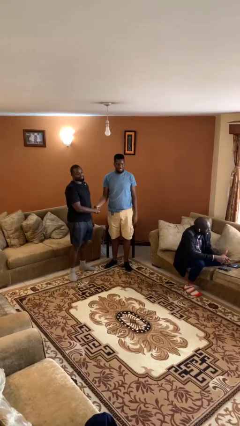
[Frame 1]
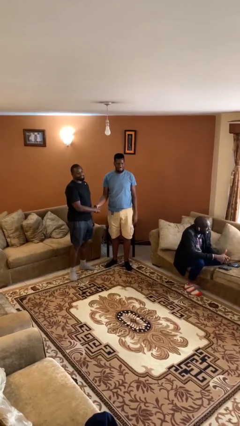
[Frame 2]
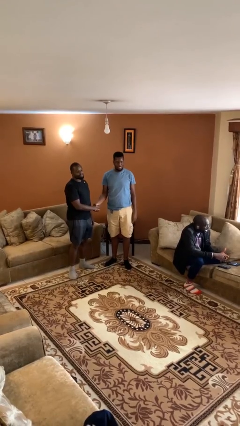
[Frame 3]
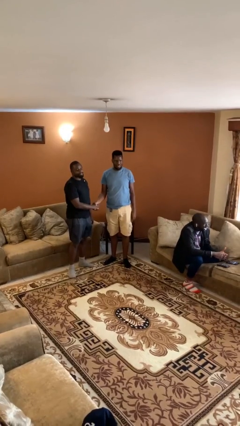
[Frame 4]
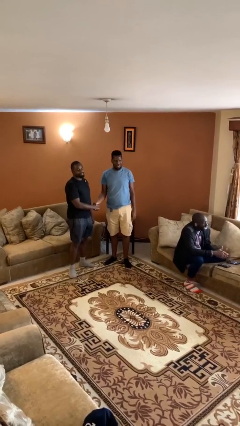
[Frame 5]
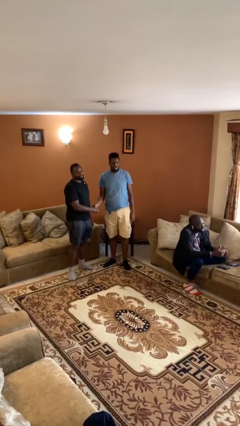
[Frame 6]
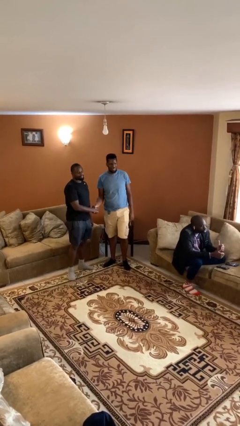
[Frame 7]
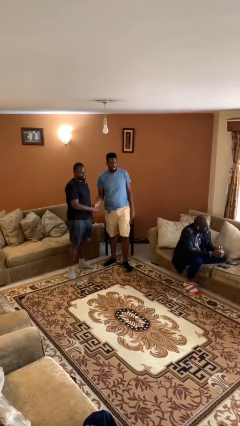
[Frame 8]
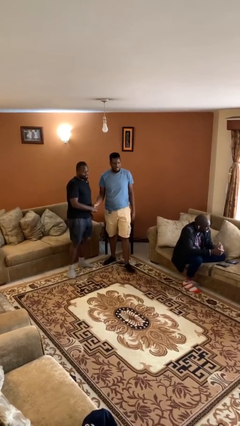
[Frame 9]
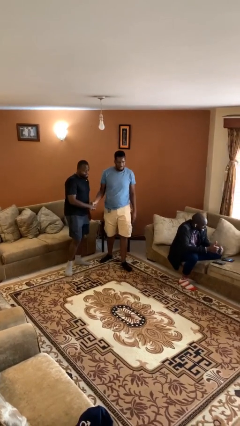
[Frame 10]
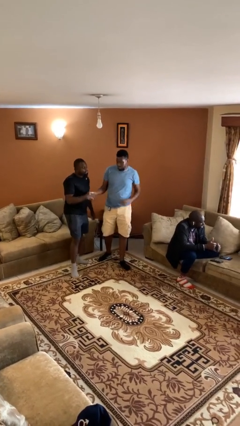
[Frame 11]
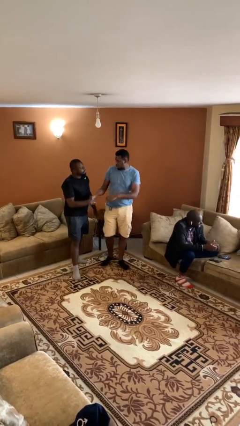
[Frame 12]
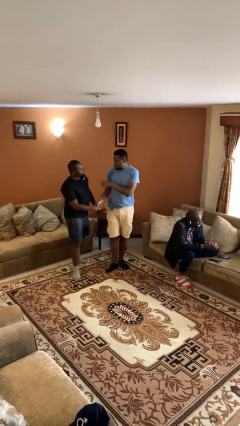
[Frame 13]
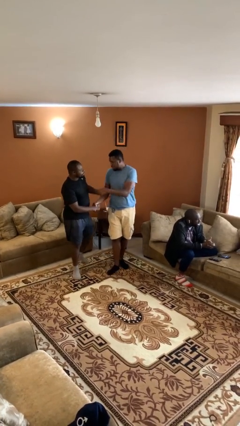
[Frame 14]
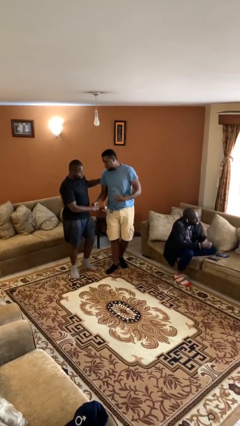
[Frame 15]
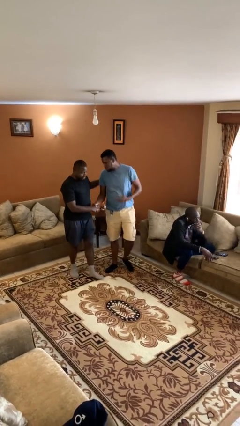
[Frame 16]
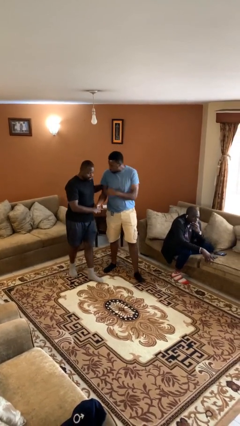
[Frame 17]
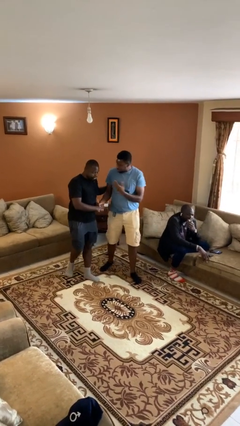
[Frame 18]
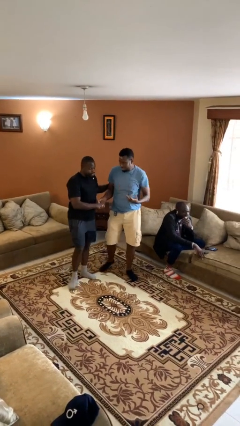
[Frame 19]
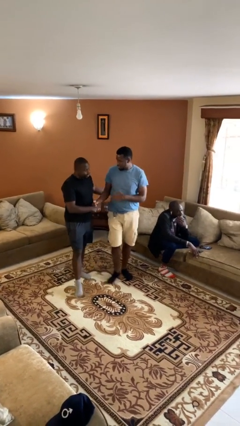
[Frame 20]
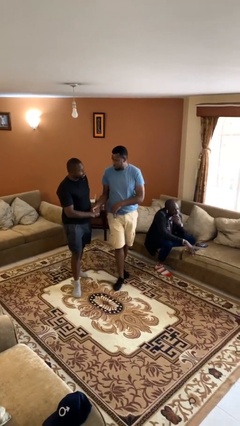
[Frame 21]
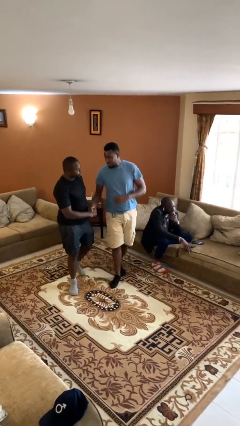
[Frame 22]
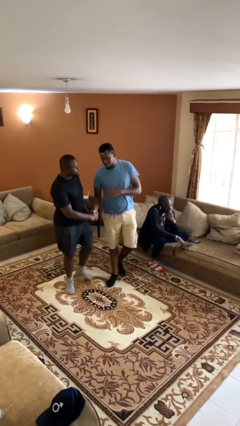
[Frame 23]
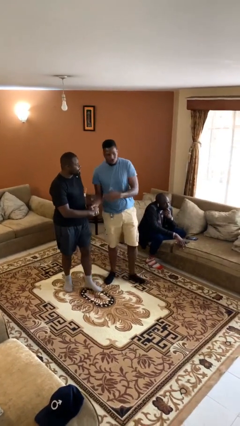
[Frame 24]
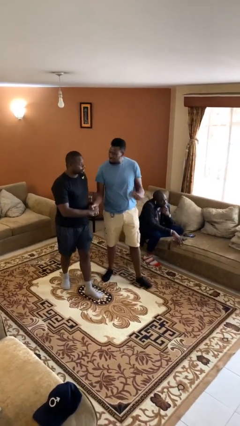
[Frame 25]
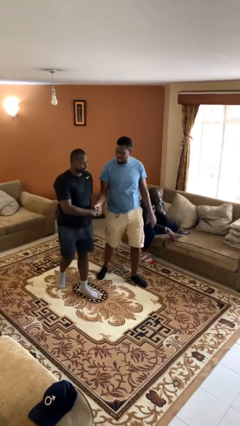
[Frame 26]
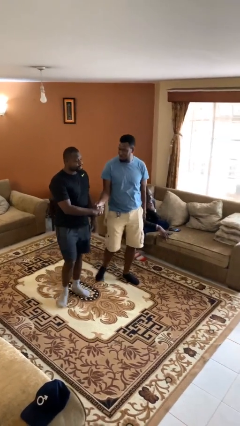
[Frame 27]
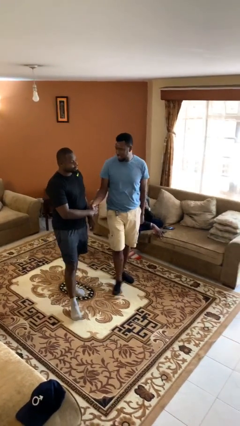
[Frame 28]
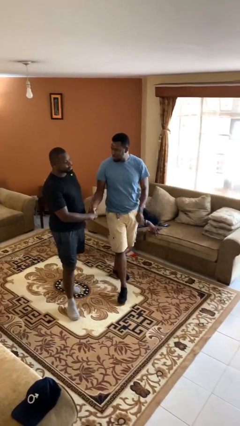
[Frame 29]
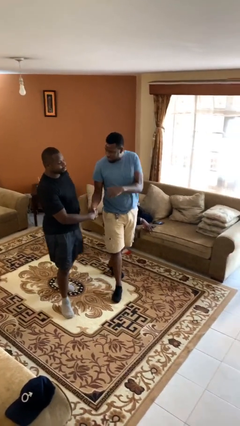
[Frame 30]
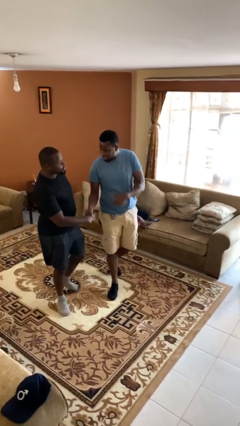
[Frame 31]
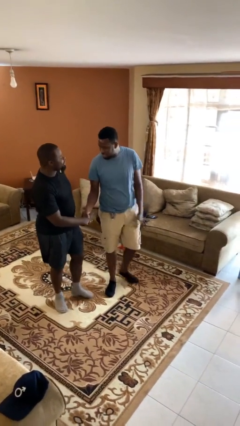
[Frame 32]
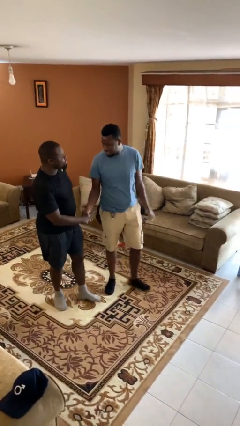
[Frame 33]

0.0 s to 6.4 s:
person holds hand

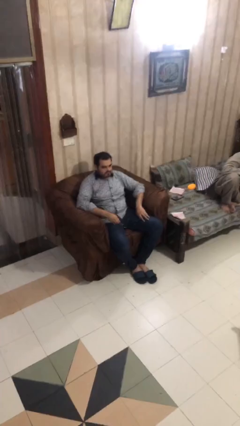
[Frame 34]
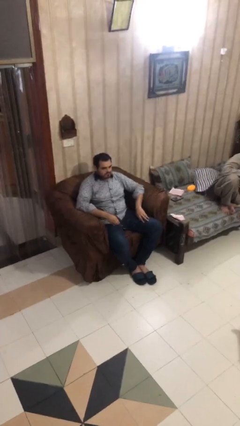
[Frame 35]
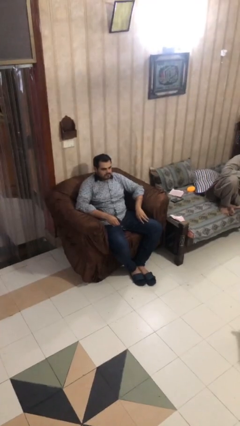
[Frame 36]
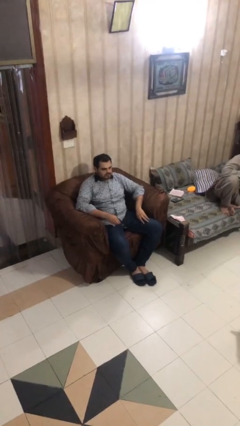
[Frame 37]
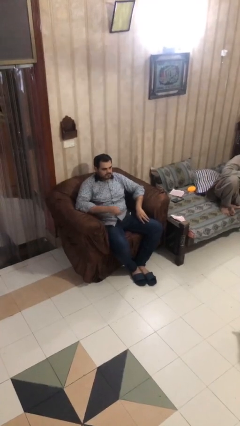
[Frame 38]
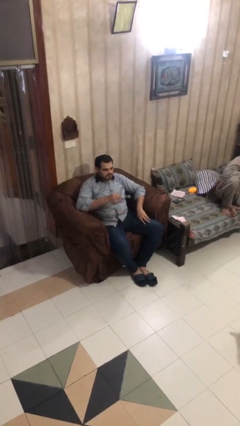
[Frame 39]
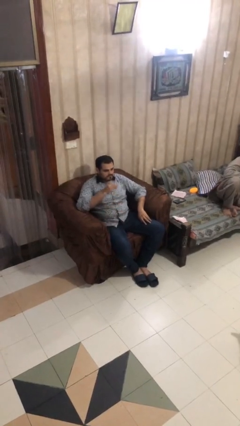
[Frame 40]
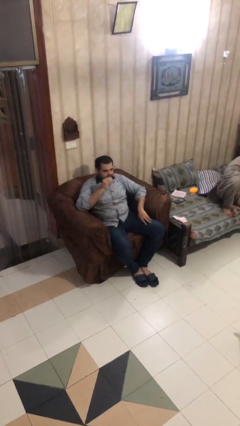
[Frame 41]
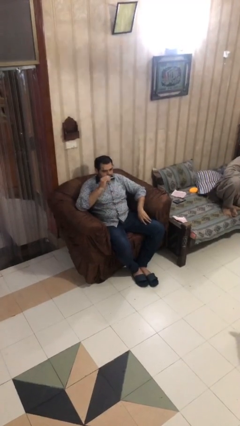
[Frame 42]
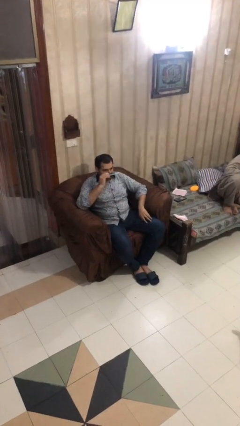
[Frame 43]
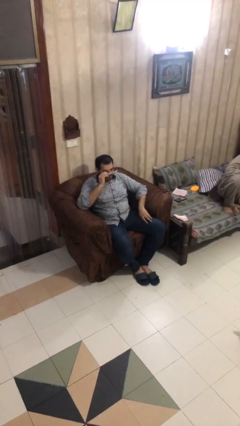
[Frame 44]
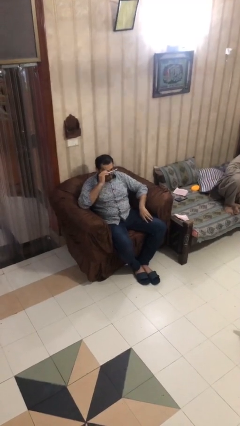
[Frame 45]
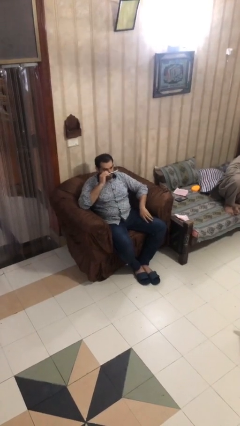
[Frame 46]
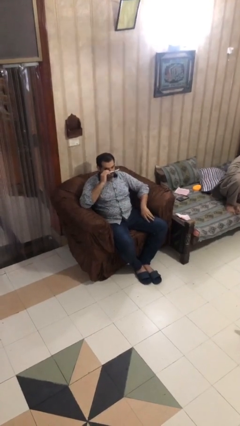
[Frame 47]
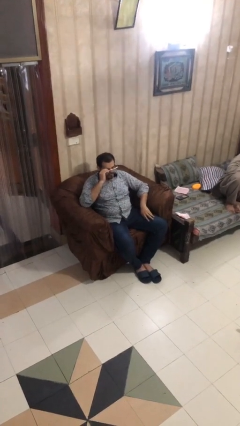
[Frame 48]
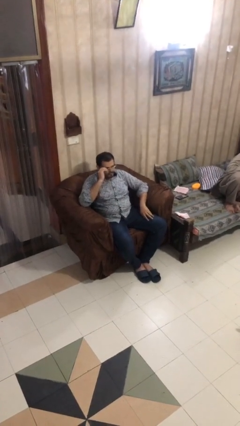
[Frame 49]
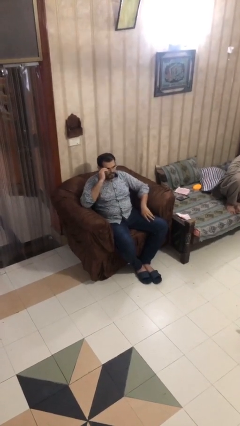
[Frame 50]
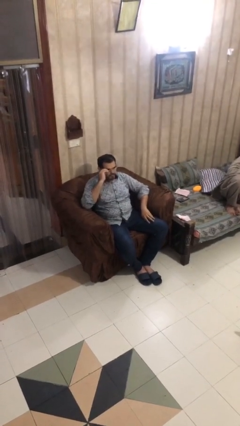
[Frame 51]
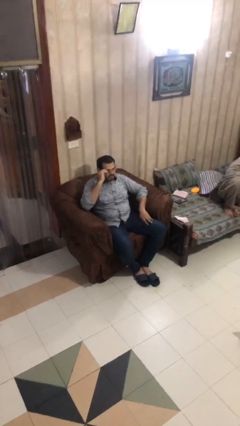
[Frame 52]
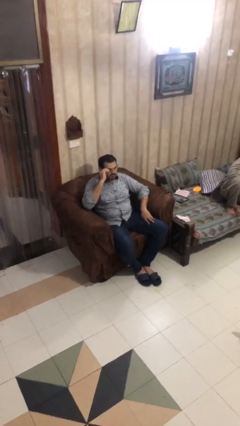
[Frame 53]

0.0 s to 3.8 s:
person puts on glasses

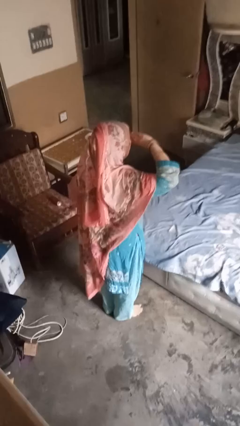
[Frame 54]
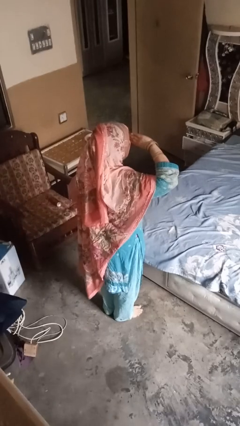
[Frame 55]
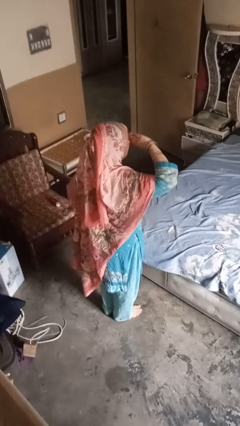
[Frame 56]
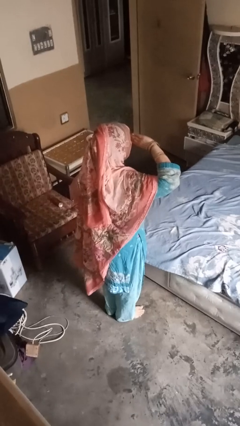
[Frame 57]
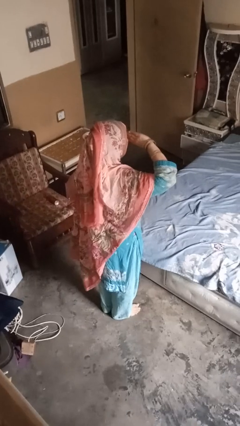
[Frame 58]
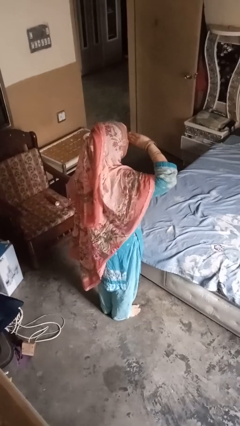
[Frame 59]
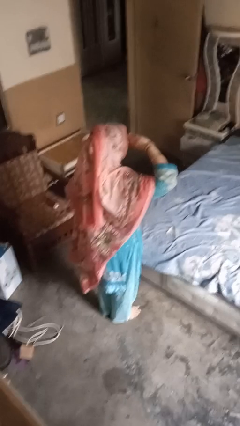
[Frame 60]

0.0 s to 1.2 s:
person salutes

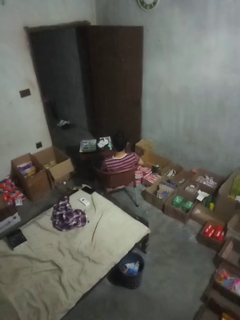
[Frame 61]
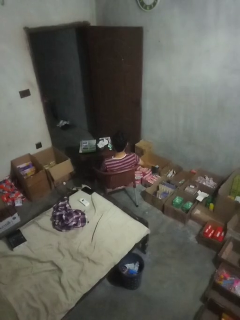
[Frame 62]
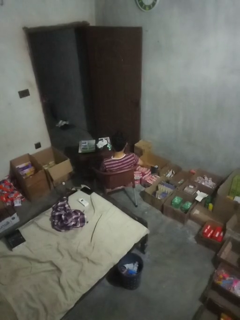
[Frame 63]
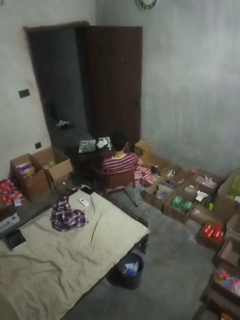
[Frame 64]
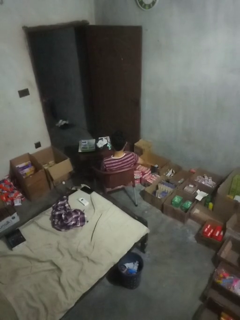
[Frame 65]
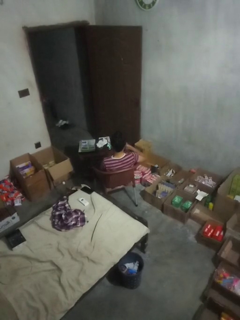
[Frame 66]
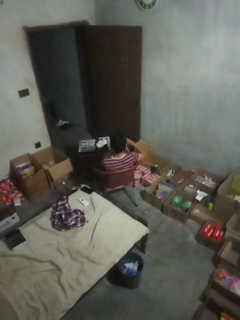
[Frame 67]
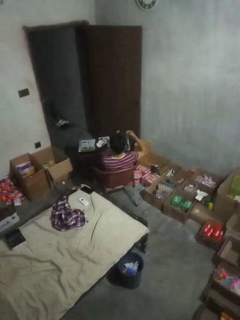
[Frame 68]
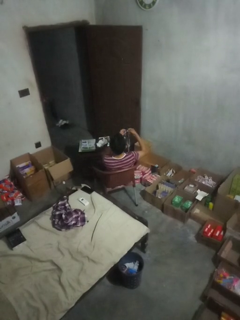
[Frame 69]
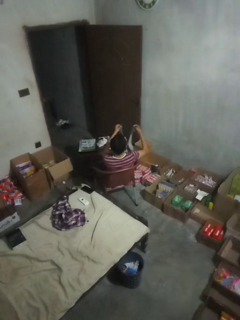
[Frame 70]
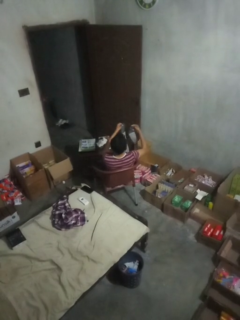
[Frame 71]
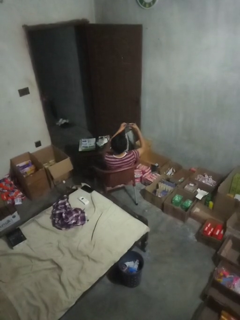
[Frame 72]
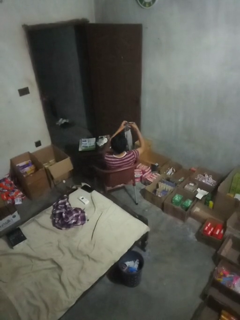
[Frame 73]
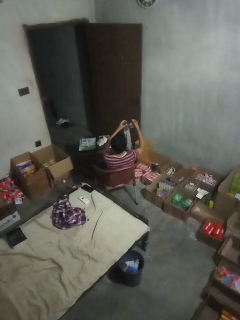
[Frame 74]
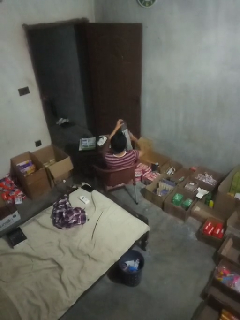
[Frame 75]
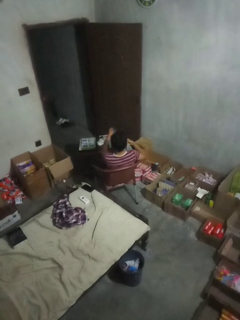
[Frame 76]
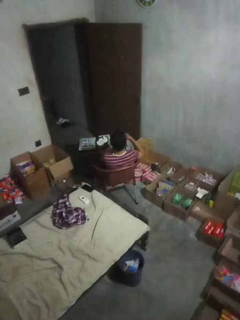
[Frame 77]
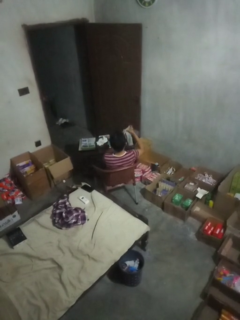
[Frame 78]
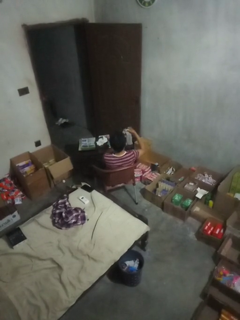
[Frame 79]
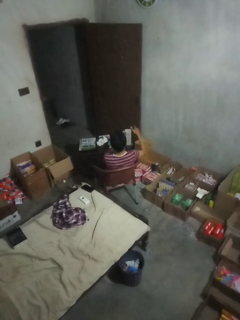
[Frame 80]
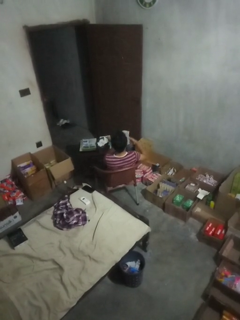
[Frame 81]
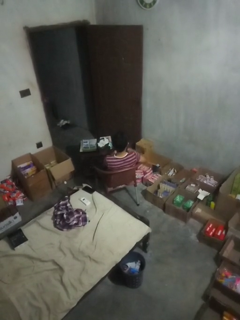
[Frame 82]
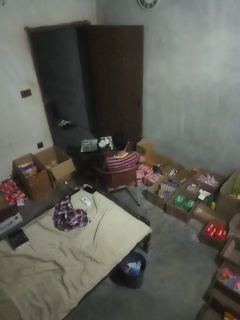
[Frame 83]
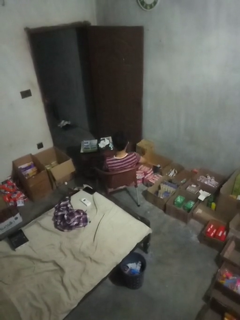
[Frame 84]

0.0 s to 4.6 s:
person folds socks

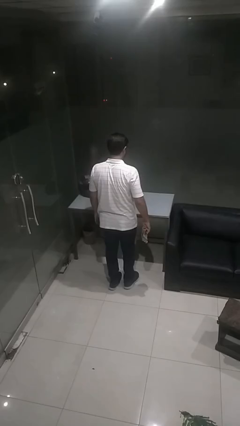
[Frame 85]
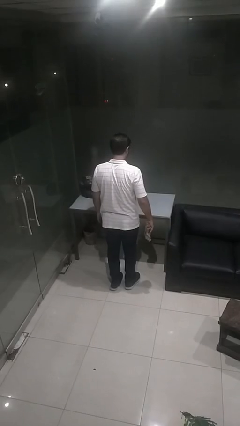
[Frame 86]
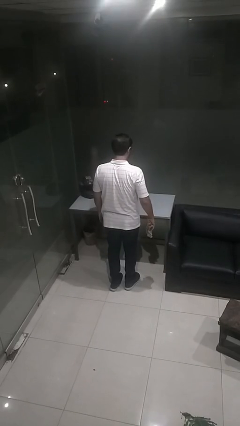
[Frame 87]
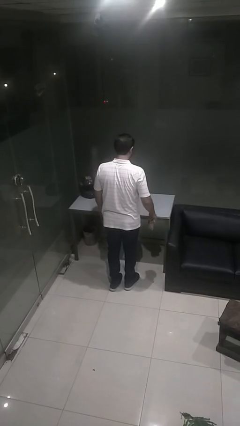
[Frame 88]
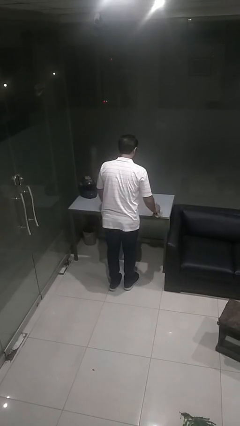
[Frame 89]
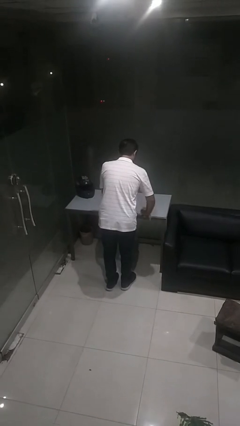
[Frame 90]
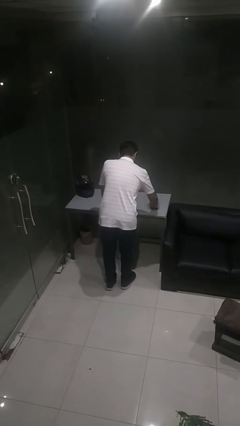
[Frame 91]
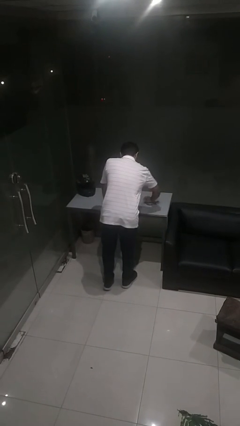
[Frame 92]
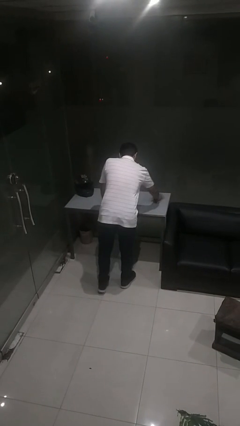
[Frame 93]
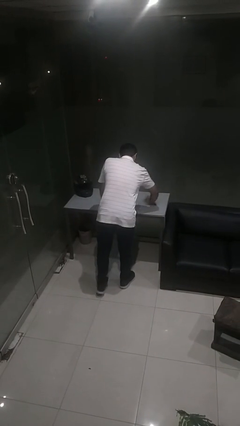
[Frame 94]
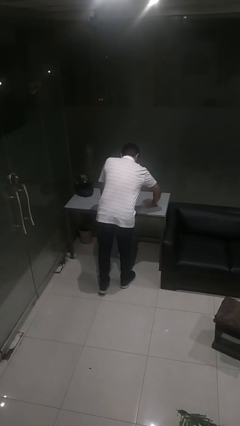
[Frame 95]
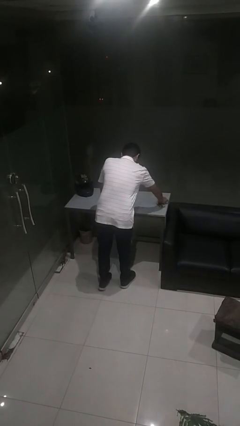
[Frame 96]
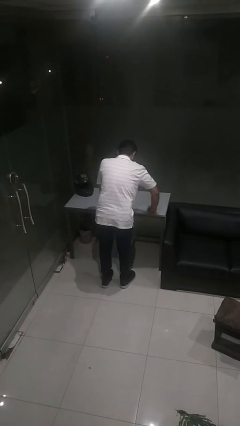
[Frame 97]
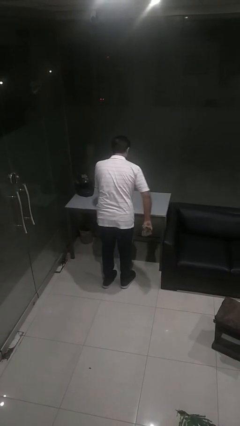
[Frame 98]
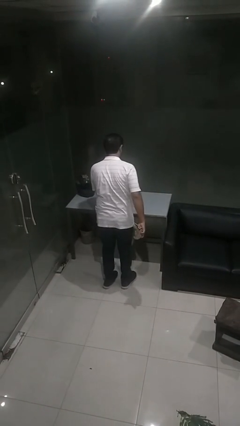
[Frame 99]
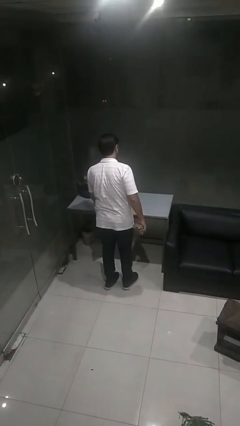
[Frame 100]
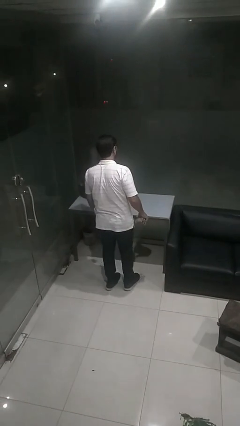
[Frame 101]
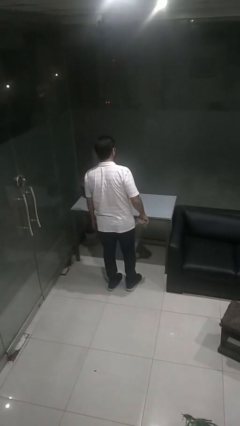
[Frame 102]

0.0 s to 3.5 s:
person cleans table with rag
